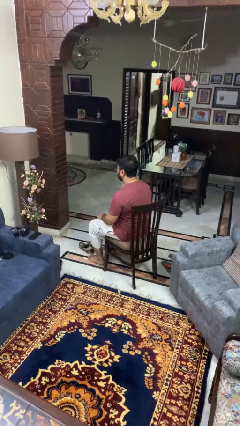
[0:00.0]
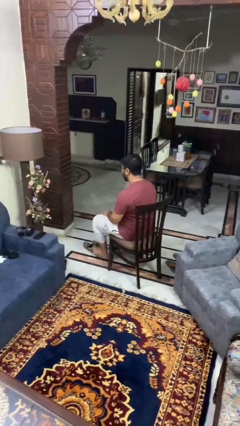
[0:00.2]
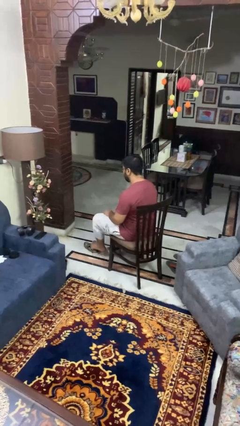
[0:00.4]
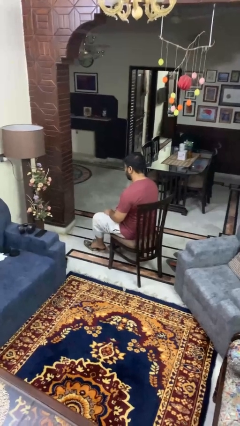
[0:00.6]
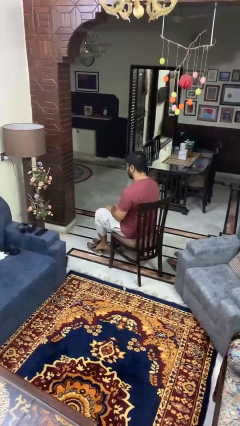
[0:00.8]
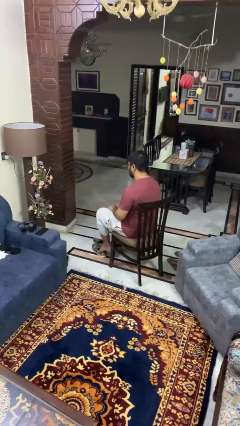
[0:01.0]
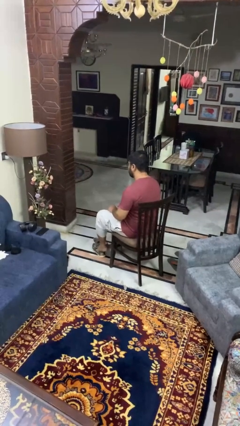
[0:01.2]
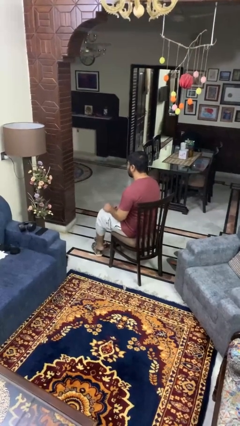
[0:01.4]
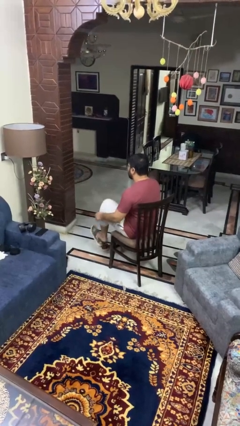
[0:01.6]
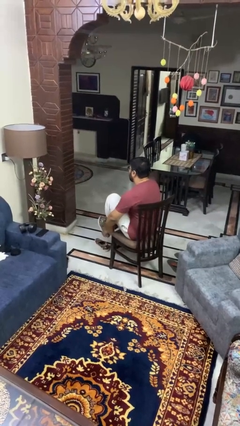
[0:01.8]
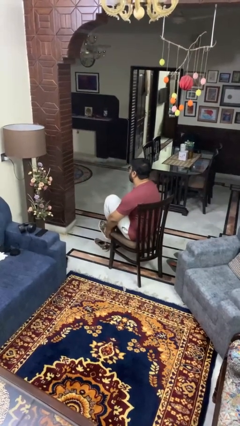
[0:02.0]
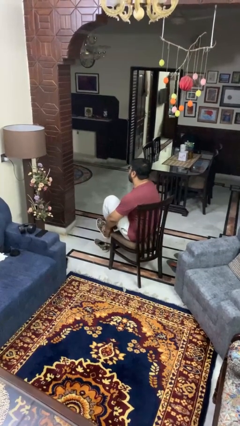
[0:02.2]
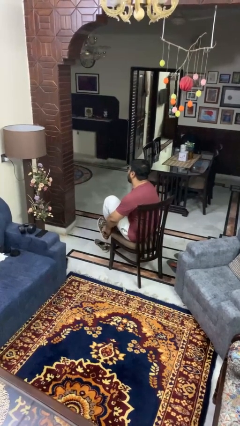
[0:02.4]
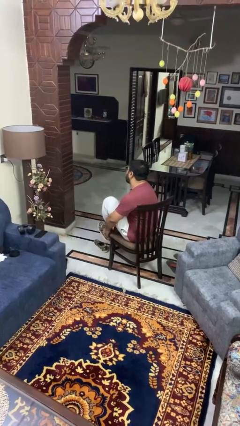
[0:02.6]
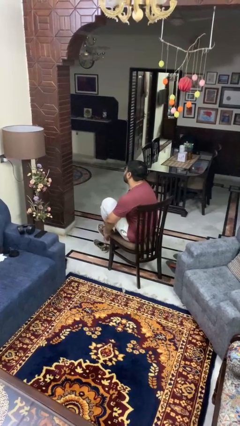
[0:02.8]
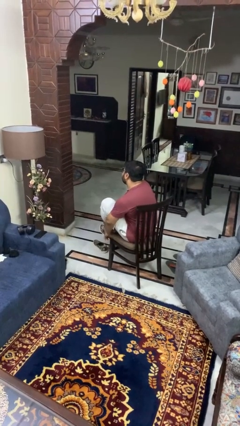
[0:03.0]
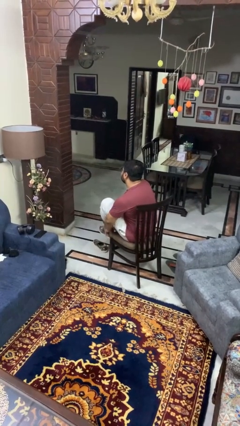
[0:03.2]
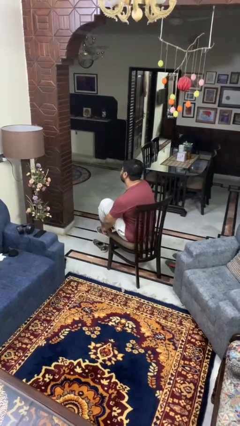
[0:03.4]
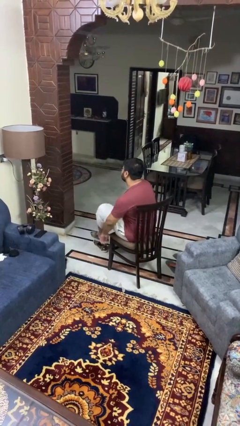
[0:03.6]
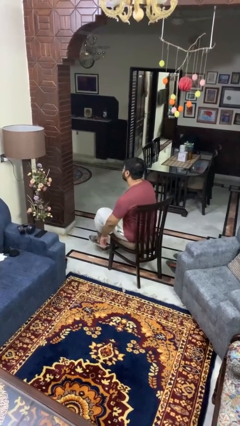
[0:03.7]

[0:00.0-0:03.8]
person puts on shoes

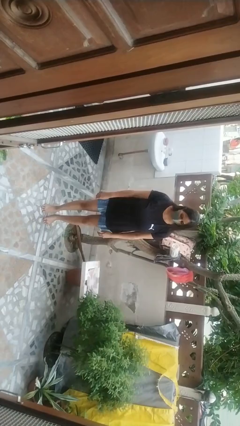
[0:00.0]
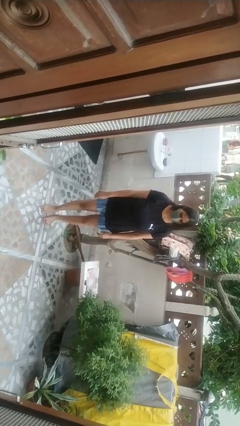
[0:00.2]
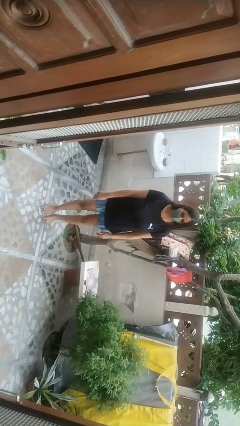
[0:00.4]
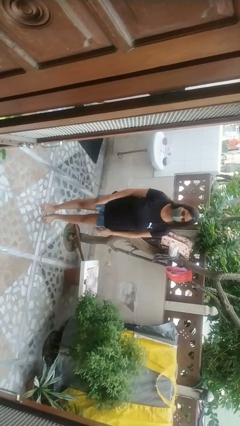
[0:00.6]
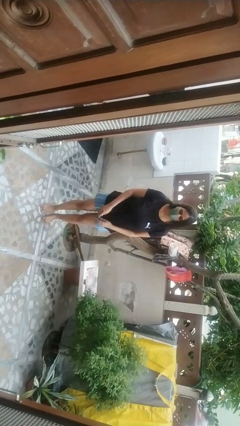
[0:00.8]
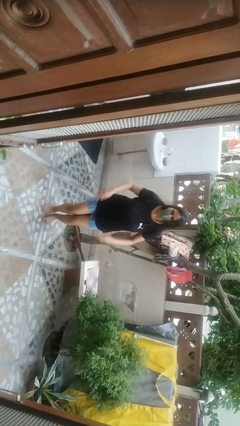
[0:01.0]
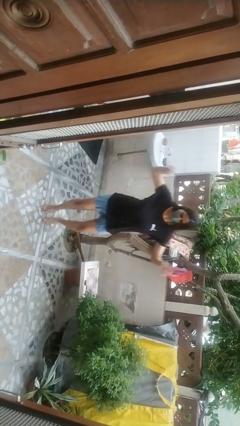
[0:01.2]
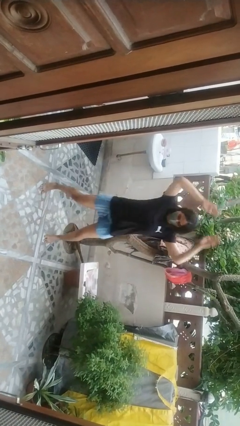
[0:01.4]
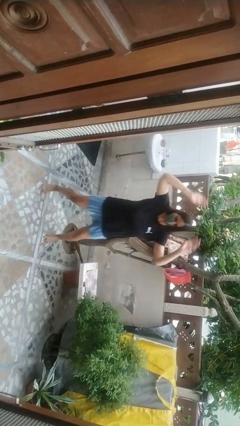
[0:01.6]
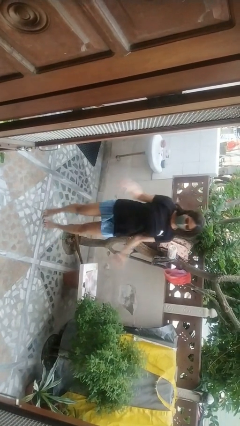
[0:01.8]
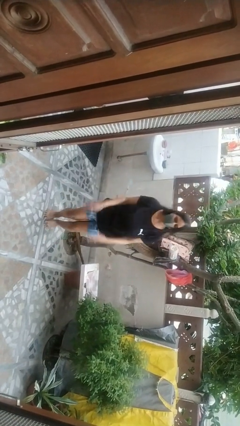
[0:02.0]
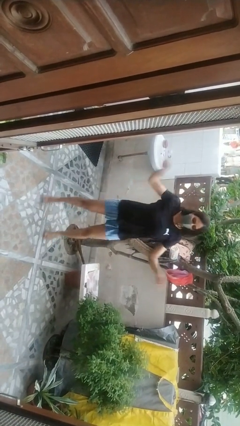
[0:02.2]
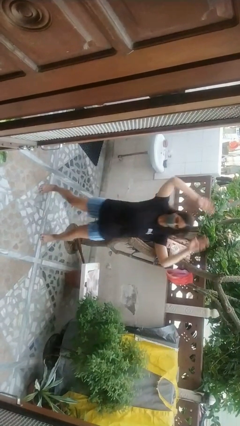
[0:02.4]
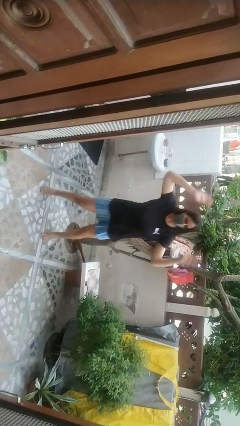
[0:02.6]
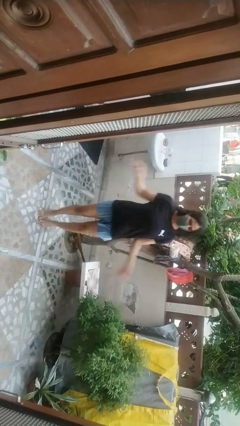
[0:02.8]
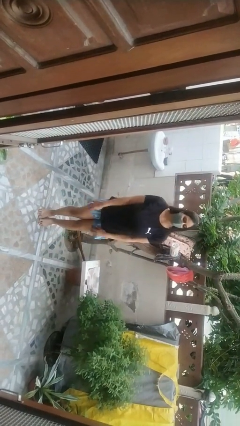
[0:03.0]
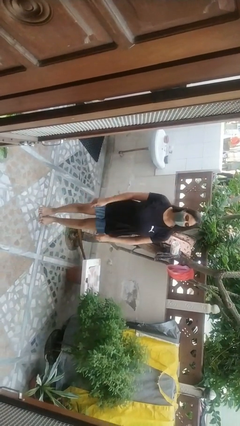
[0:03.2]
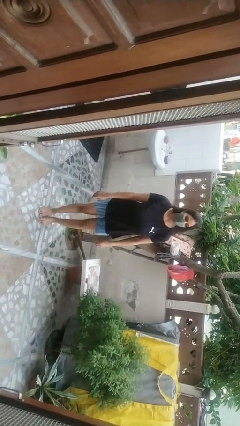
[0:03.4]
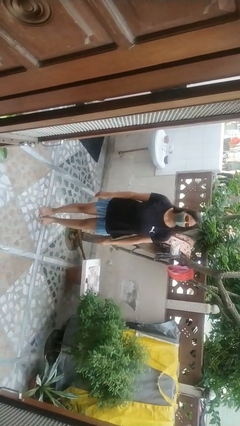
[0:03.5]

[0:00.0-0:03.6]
person exercises with jumping jacks

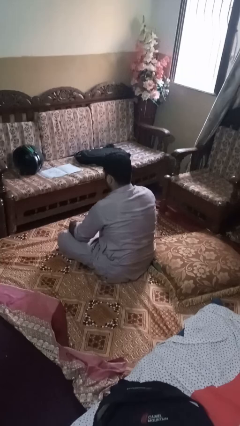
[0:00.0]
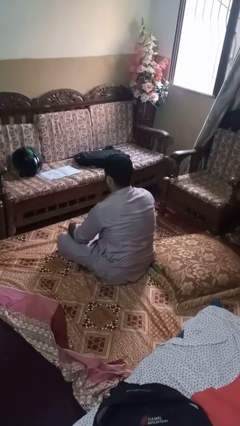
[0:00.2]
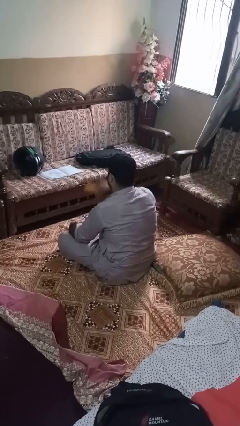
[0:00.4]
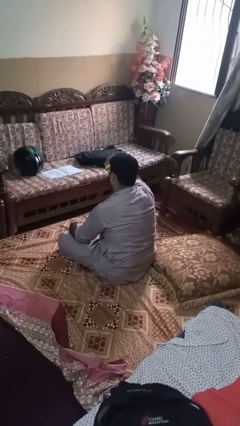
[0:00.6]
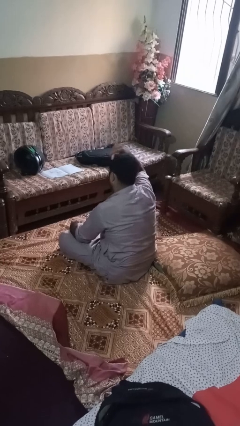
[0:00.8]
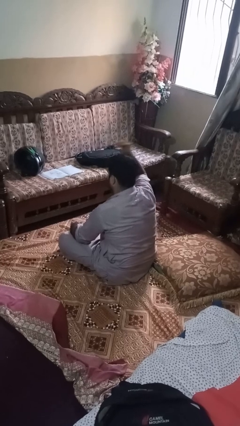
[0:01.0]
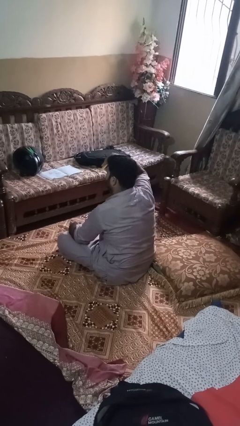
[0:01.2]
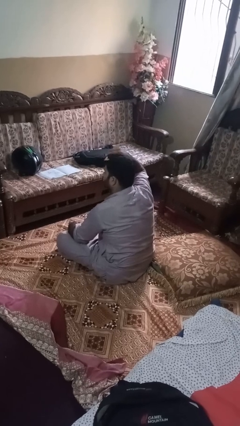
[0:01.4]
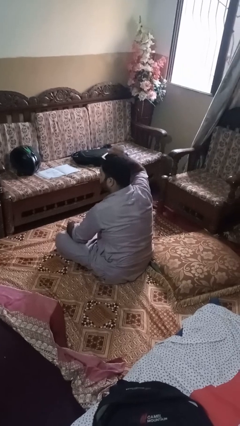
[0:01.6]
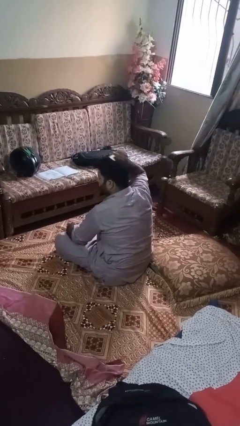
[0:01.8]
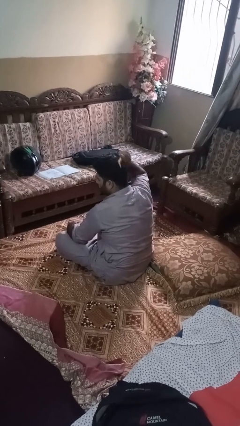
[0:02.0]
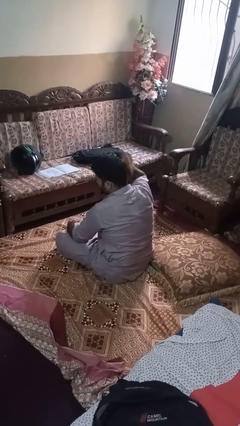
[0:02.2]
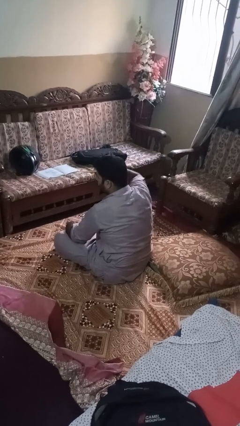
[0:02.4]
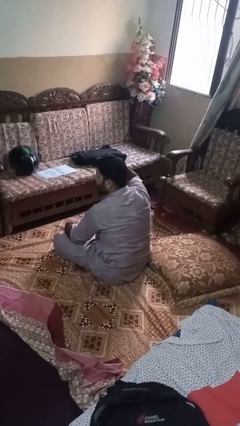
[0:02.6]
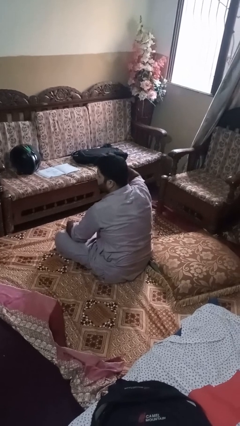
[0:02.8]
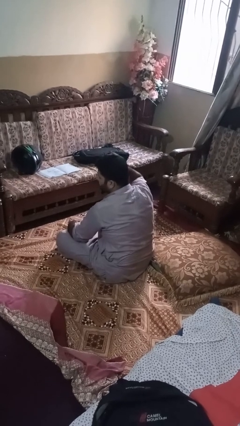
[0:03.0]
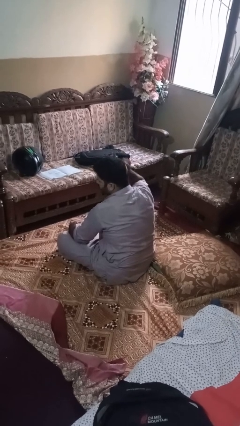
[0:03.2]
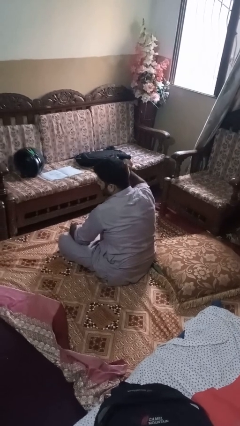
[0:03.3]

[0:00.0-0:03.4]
person brushes hair

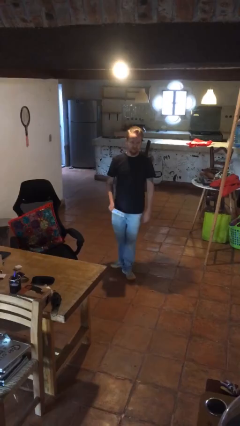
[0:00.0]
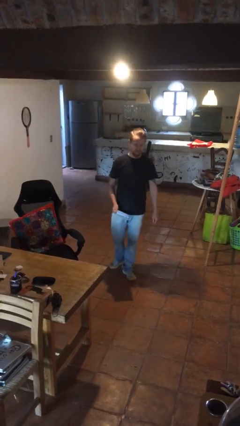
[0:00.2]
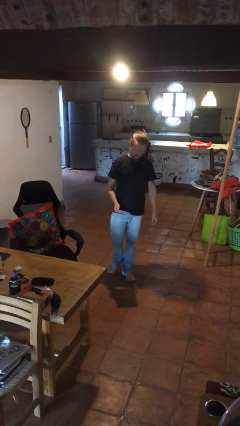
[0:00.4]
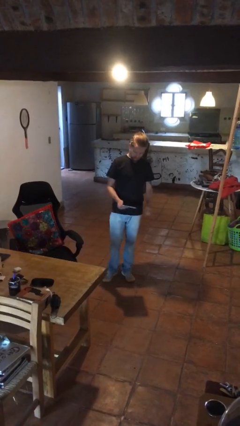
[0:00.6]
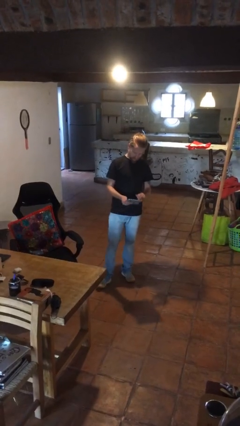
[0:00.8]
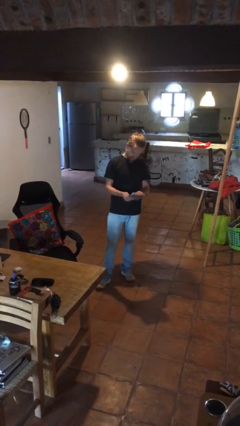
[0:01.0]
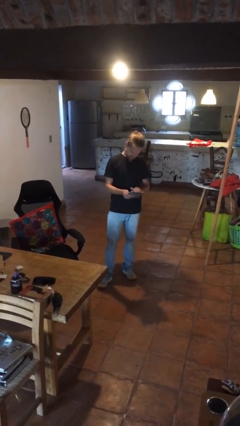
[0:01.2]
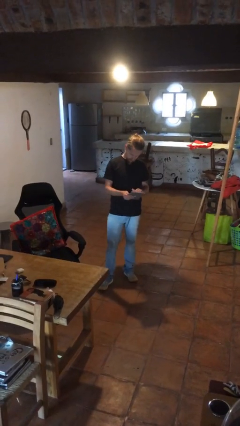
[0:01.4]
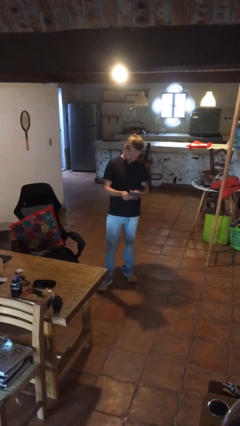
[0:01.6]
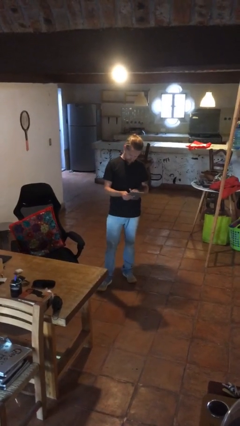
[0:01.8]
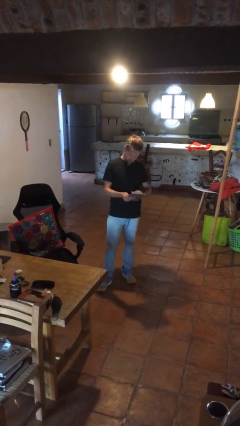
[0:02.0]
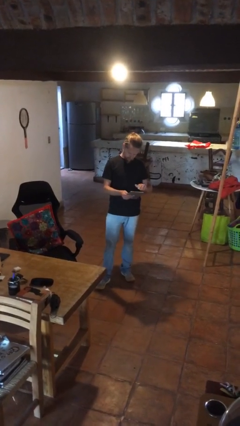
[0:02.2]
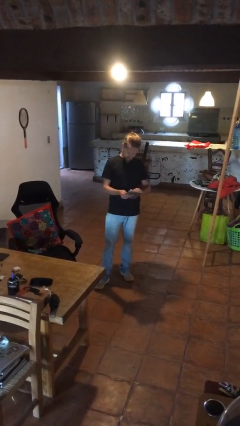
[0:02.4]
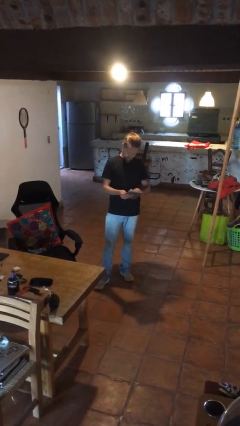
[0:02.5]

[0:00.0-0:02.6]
person interacts with tablet

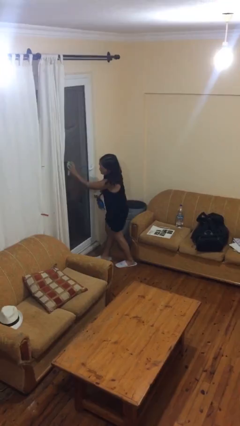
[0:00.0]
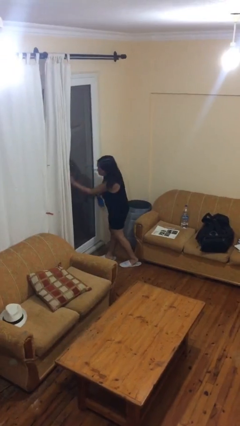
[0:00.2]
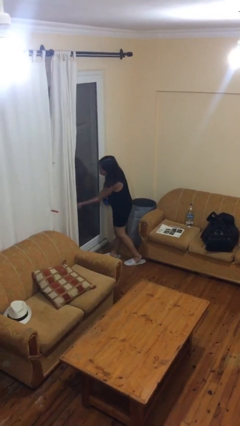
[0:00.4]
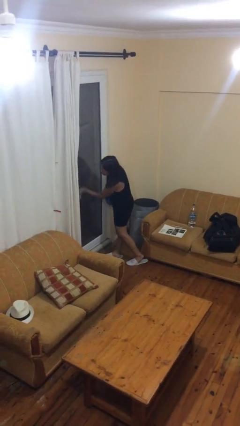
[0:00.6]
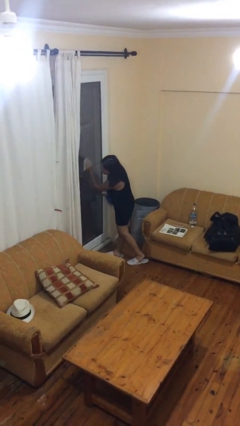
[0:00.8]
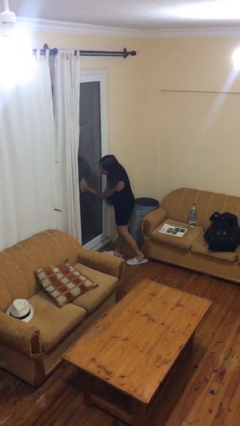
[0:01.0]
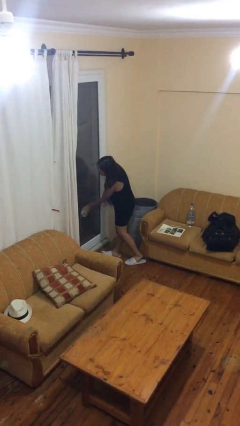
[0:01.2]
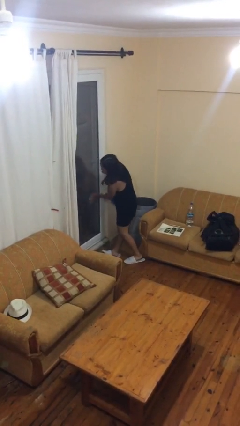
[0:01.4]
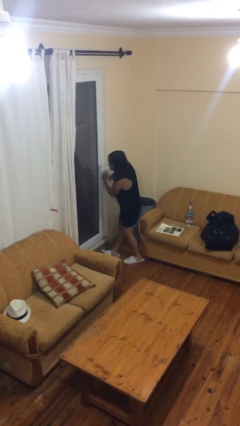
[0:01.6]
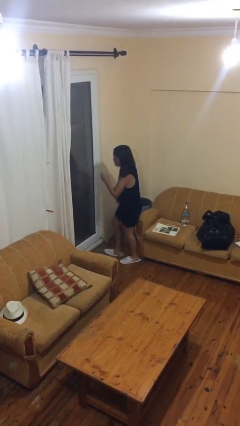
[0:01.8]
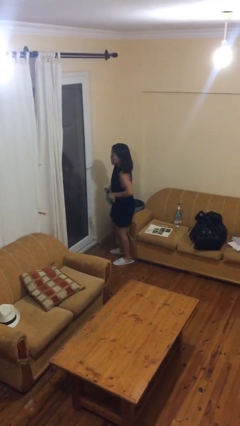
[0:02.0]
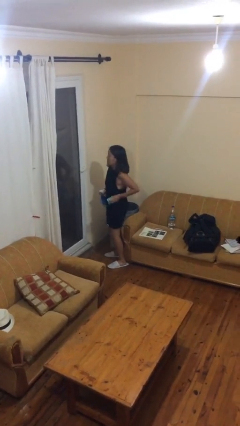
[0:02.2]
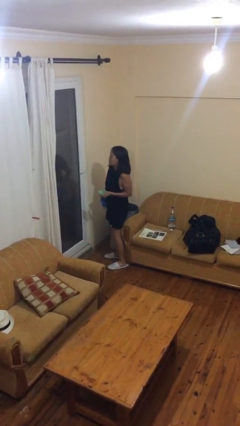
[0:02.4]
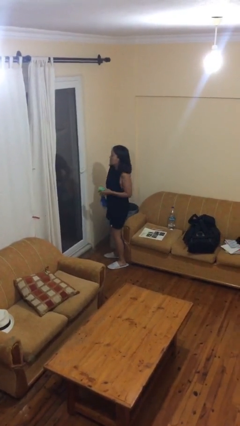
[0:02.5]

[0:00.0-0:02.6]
person washes window

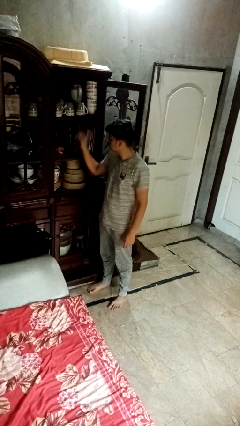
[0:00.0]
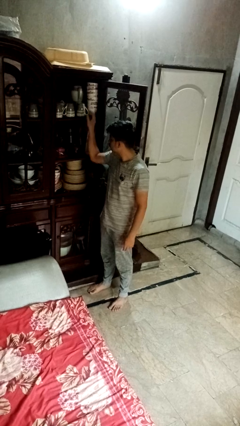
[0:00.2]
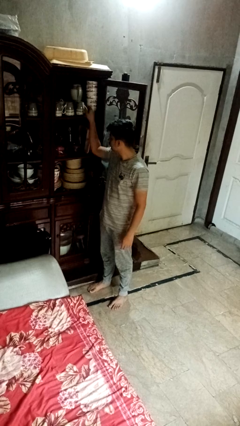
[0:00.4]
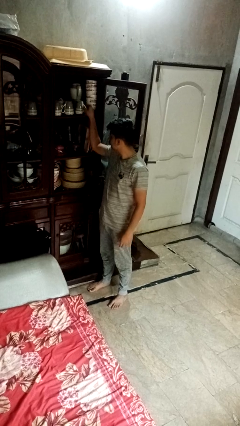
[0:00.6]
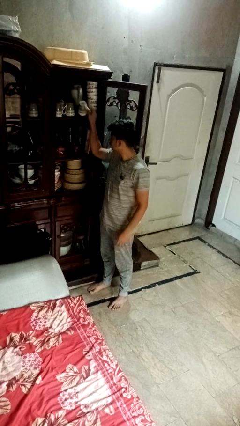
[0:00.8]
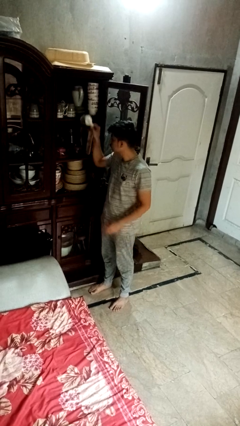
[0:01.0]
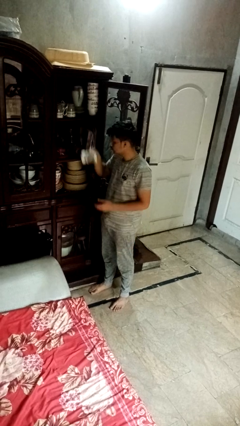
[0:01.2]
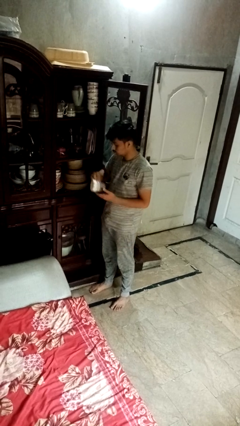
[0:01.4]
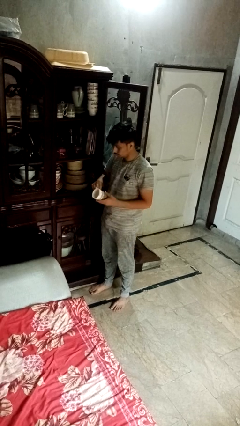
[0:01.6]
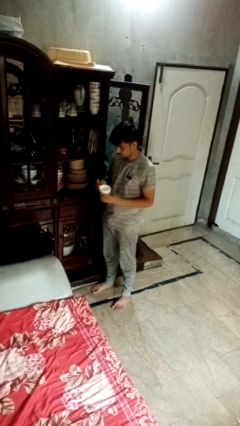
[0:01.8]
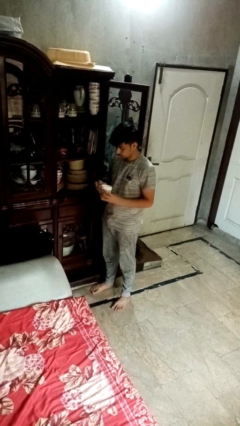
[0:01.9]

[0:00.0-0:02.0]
person takes object from cabinet
